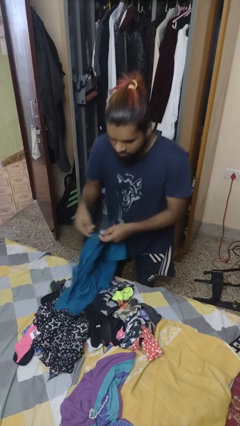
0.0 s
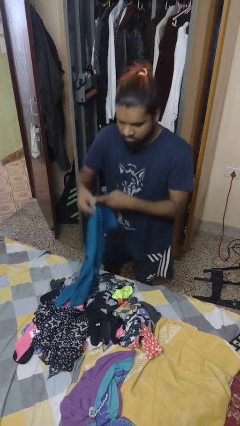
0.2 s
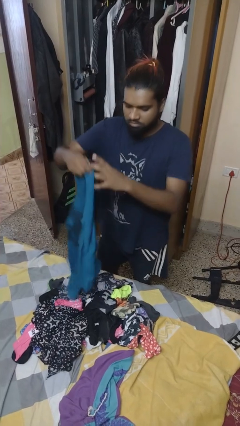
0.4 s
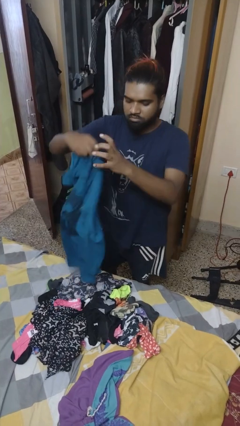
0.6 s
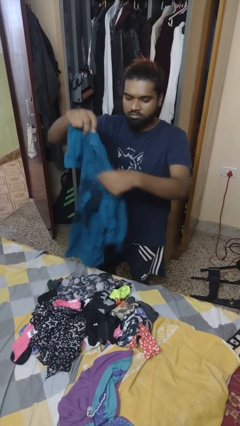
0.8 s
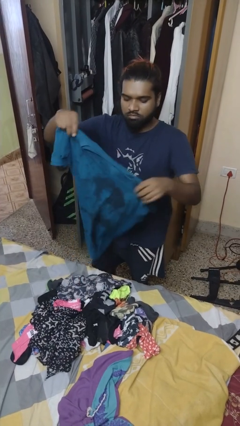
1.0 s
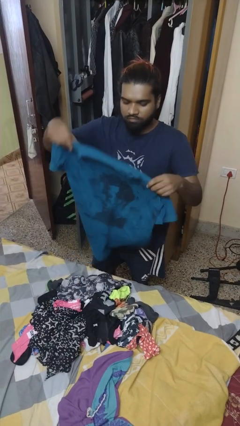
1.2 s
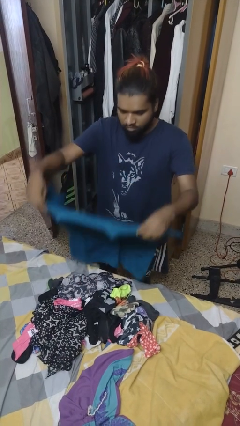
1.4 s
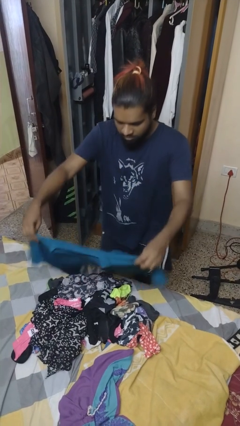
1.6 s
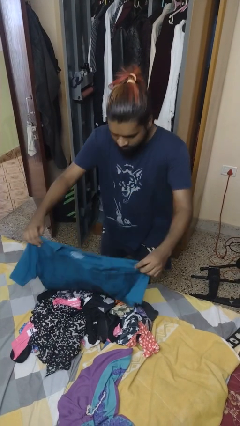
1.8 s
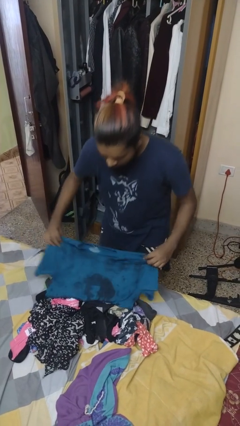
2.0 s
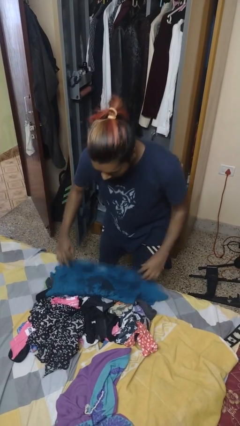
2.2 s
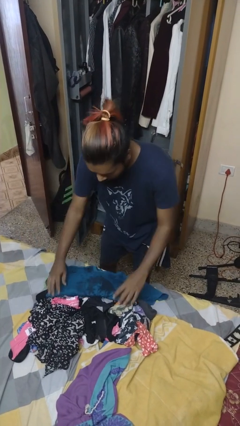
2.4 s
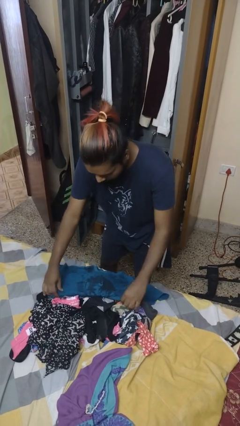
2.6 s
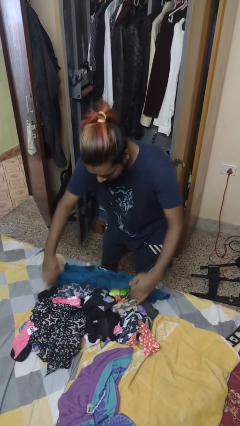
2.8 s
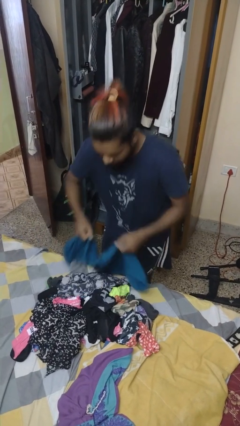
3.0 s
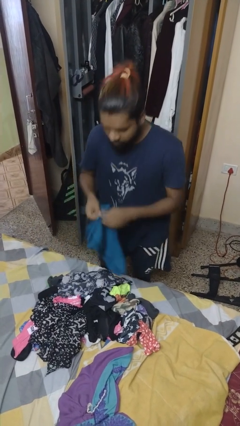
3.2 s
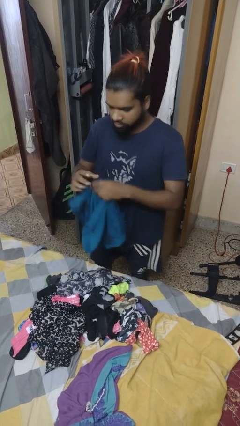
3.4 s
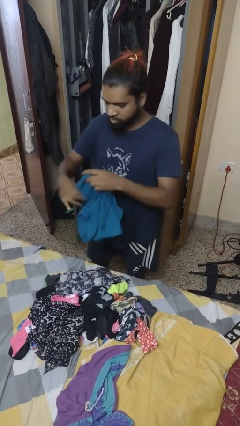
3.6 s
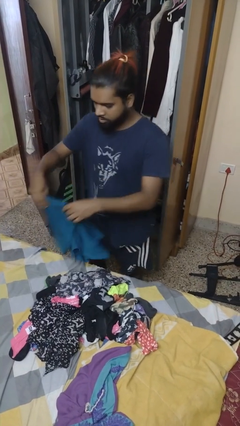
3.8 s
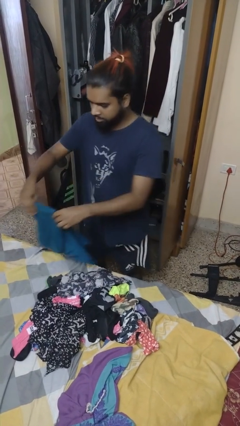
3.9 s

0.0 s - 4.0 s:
person folds shirt

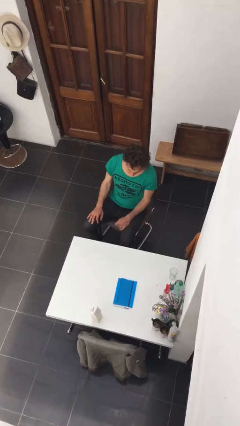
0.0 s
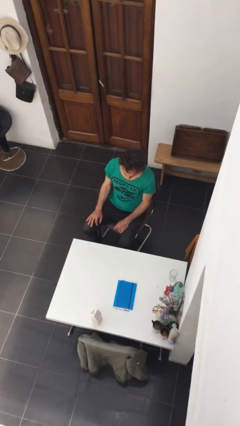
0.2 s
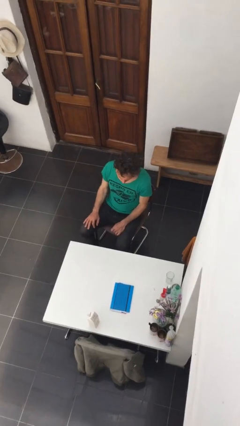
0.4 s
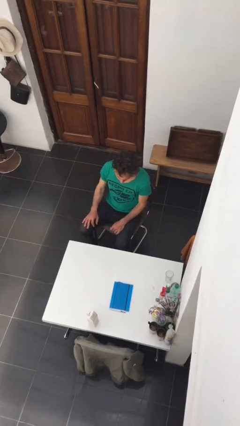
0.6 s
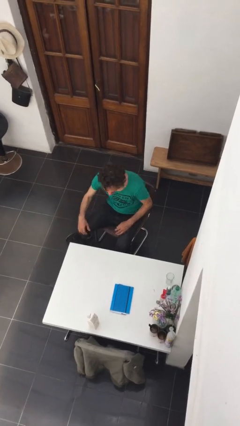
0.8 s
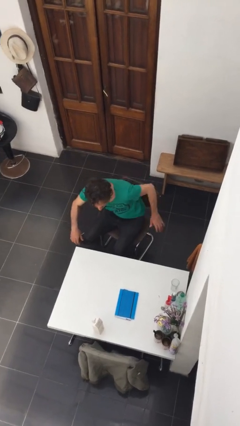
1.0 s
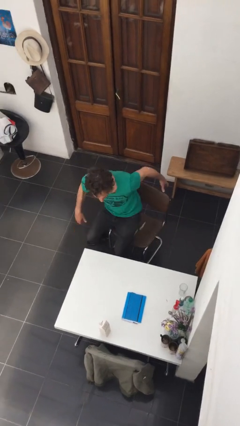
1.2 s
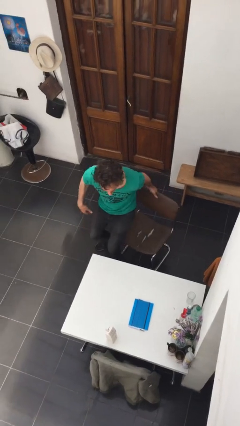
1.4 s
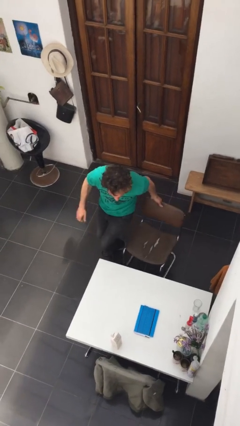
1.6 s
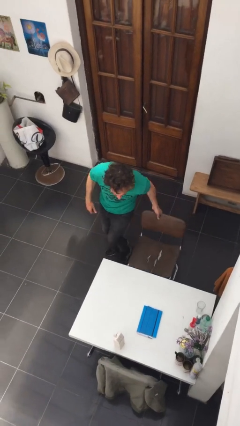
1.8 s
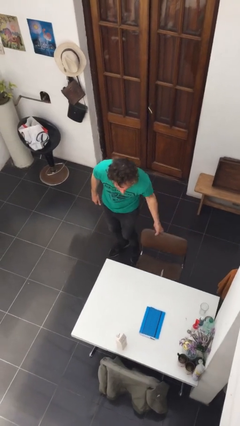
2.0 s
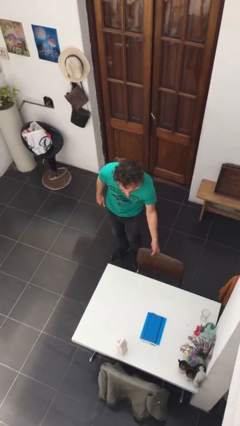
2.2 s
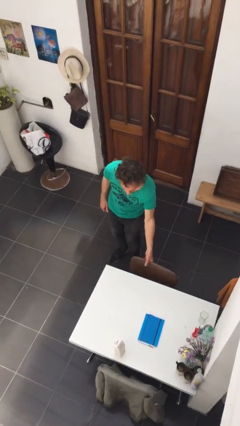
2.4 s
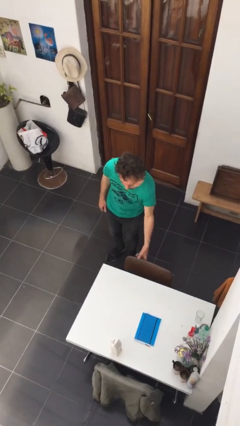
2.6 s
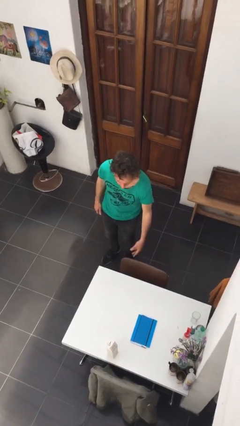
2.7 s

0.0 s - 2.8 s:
person stands up

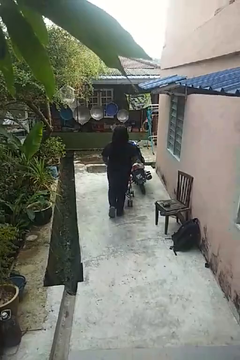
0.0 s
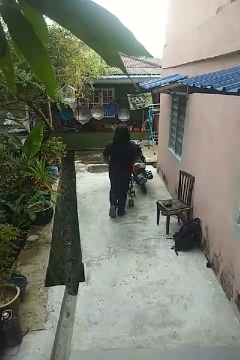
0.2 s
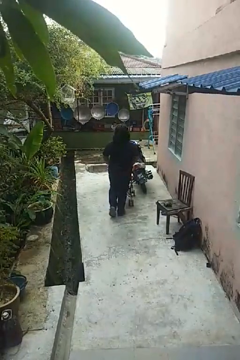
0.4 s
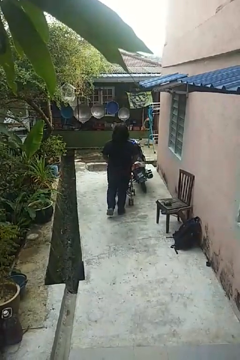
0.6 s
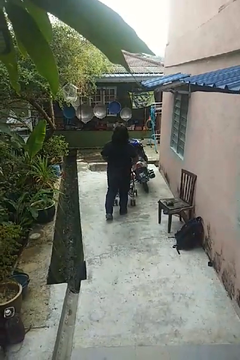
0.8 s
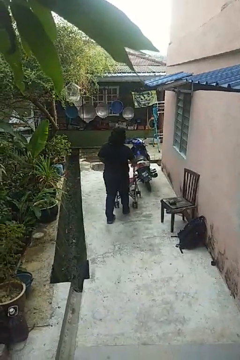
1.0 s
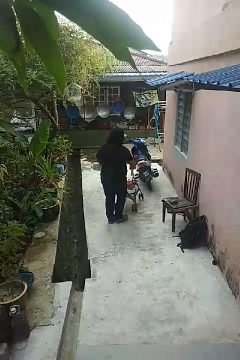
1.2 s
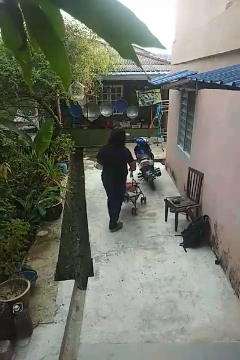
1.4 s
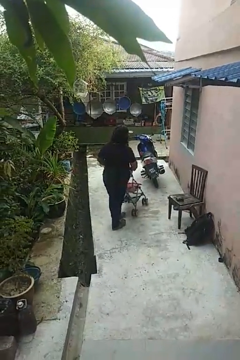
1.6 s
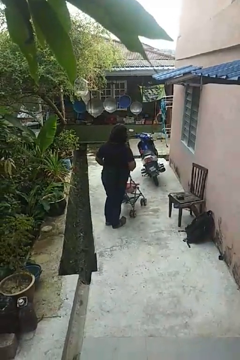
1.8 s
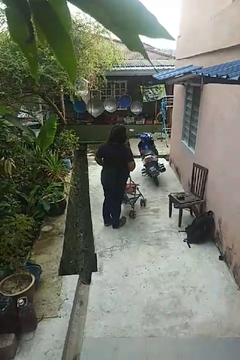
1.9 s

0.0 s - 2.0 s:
person pulls wheeled cart

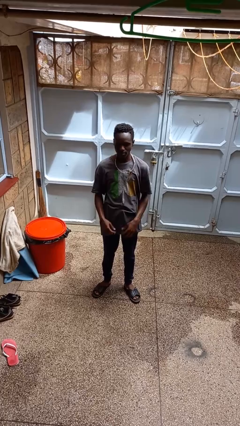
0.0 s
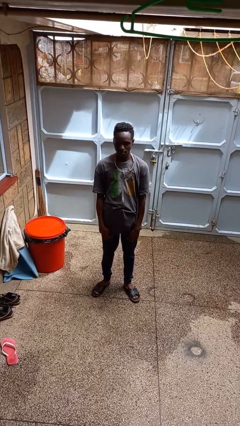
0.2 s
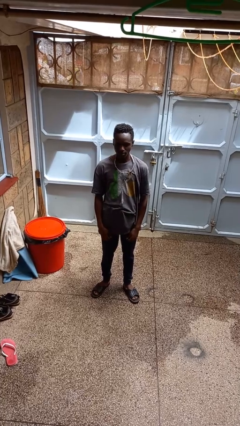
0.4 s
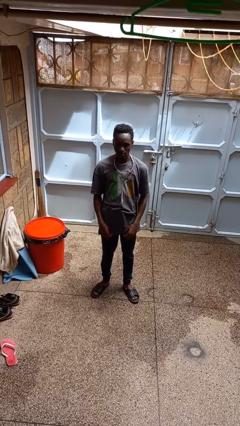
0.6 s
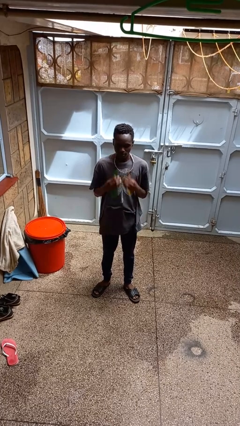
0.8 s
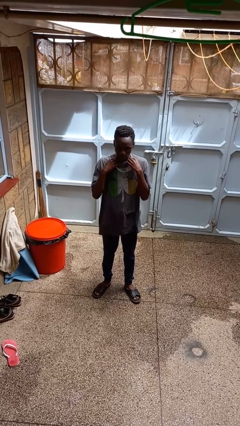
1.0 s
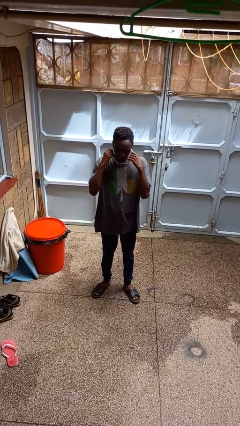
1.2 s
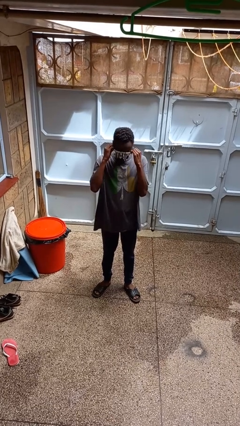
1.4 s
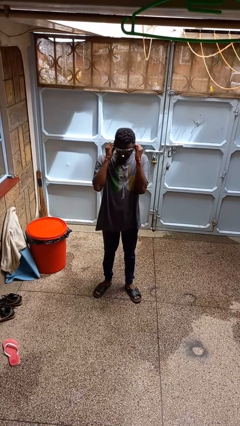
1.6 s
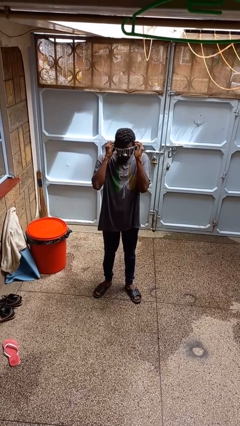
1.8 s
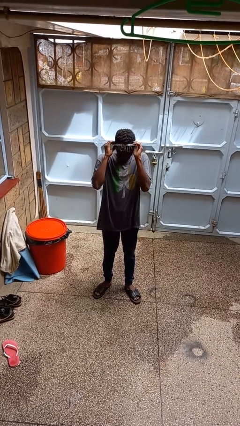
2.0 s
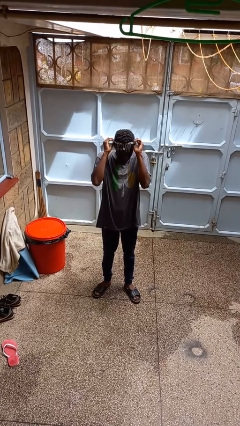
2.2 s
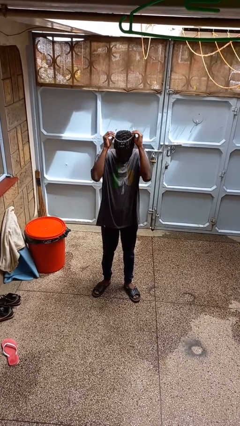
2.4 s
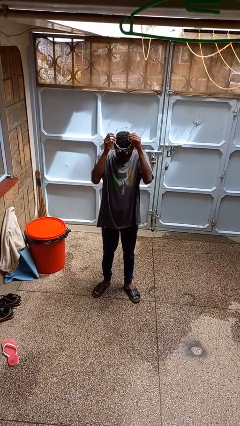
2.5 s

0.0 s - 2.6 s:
person takes off necklace

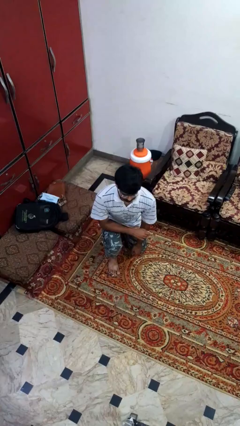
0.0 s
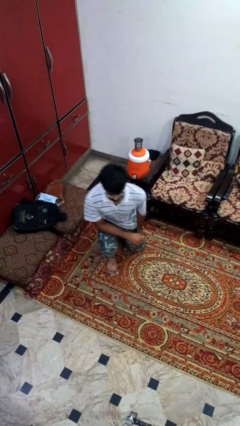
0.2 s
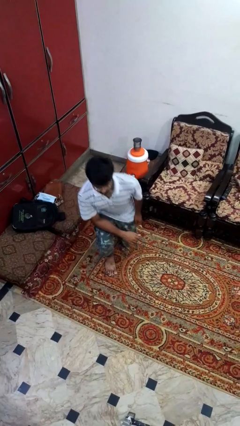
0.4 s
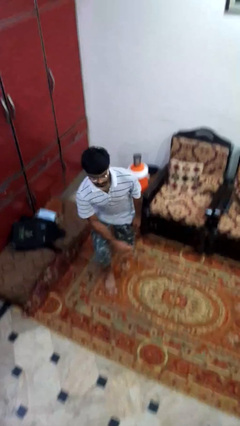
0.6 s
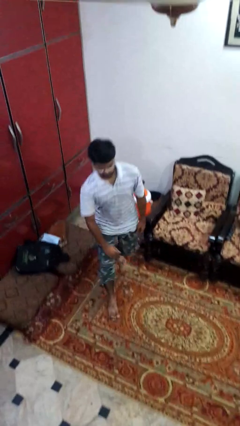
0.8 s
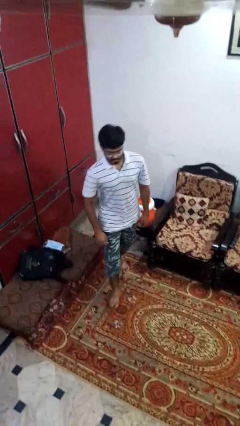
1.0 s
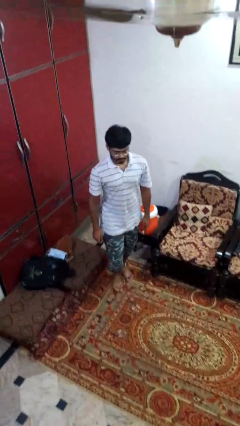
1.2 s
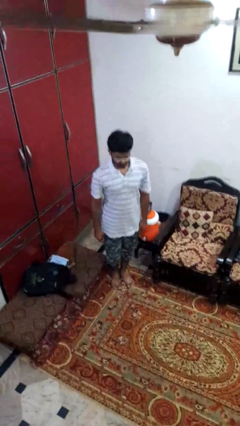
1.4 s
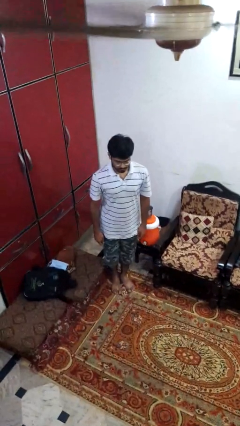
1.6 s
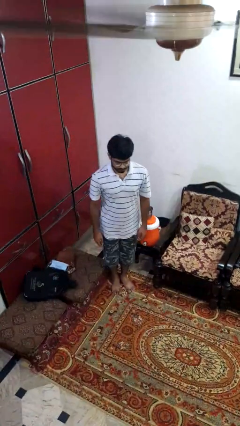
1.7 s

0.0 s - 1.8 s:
person stands up from floor

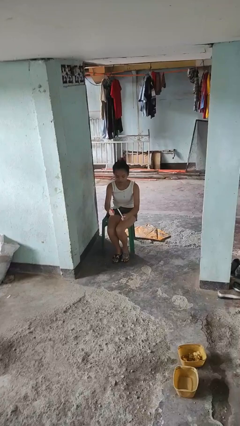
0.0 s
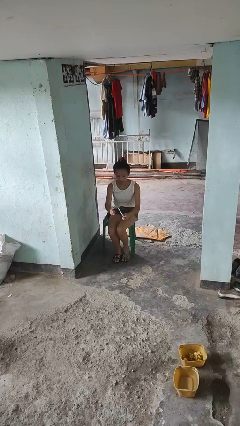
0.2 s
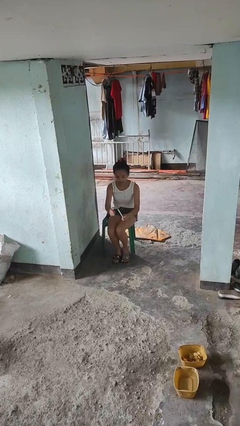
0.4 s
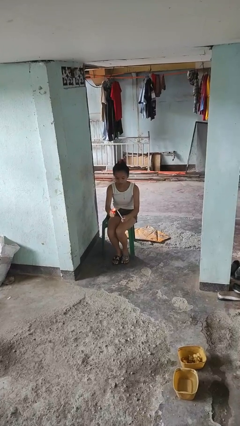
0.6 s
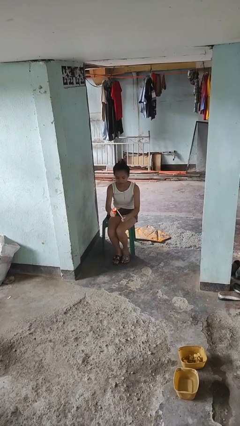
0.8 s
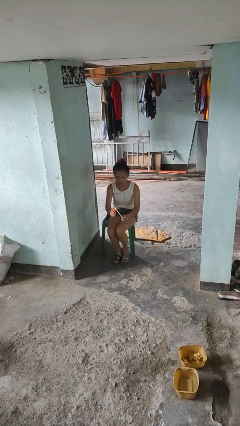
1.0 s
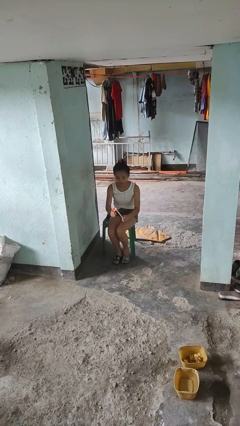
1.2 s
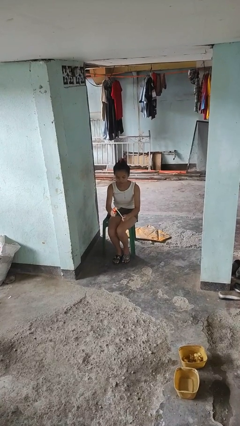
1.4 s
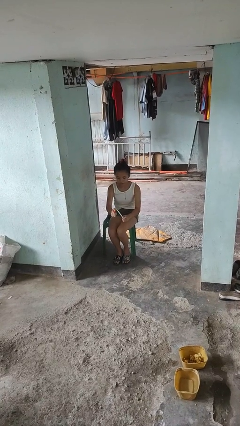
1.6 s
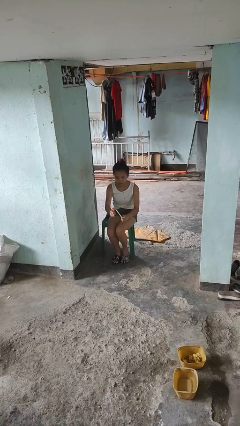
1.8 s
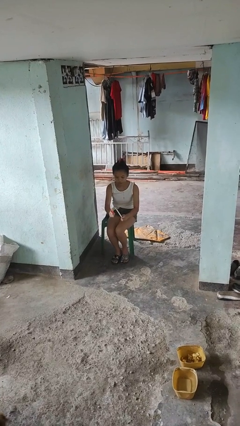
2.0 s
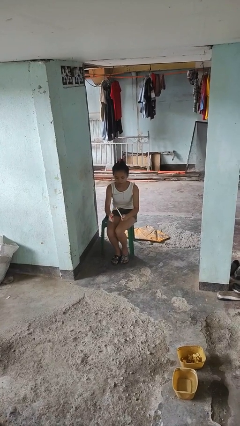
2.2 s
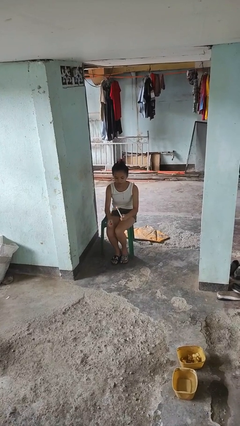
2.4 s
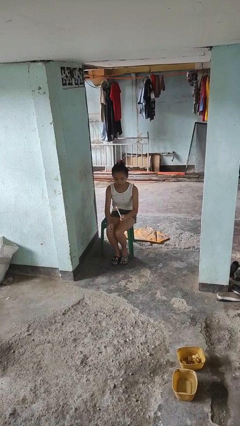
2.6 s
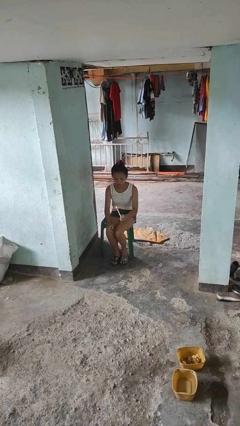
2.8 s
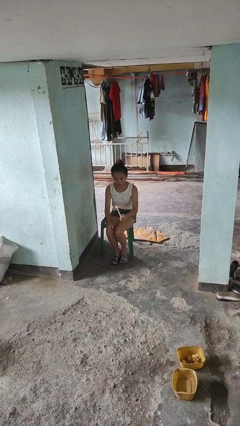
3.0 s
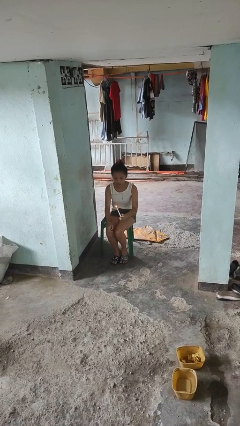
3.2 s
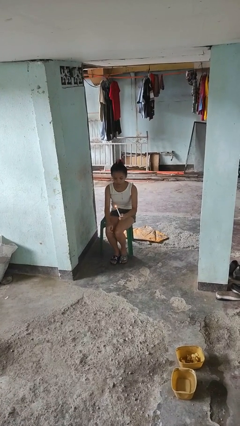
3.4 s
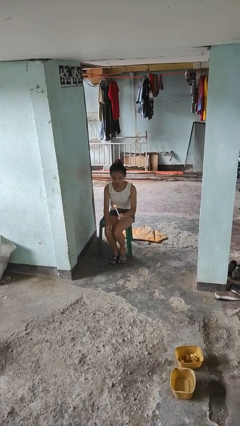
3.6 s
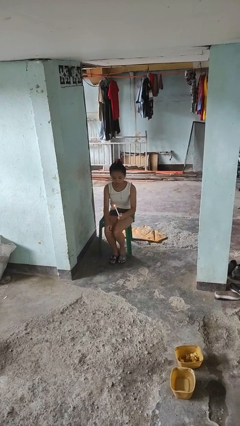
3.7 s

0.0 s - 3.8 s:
person lights candle

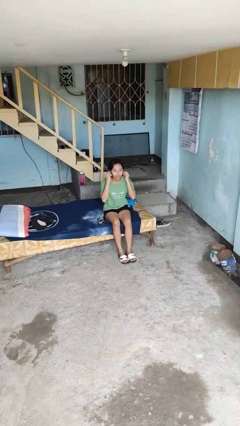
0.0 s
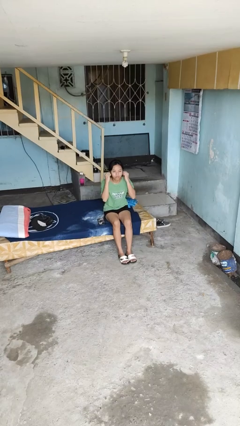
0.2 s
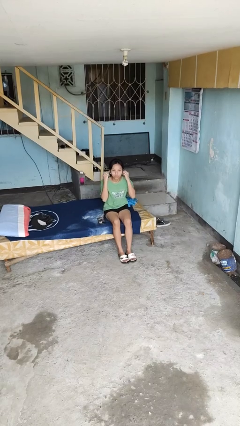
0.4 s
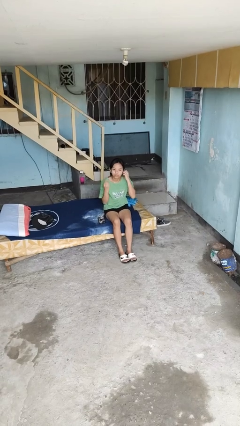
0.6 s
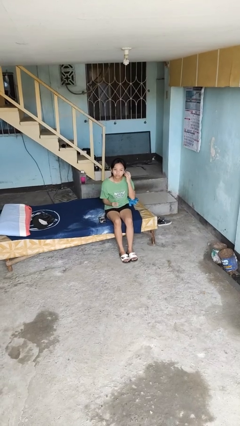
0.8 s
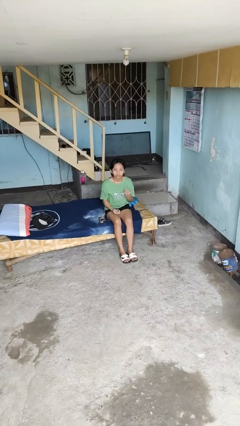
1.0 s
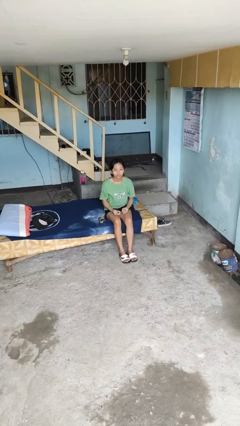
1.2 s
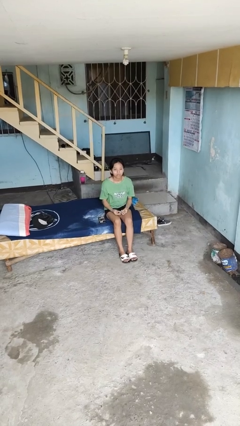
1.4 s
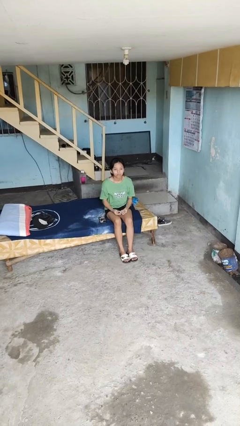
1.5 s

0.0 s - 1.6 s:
person takes off headphones
